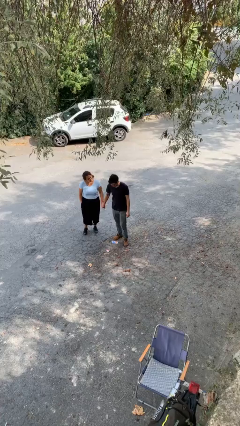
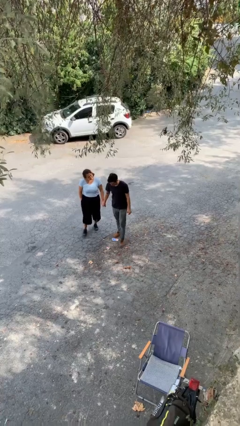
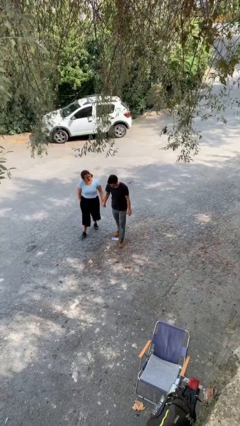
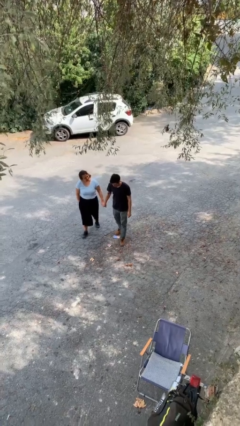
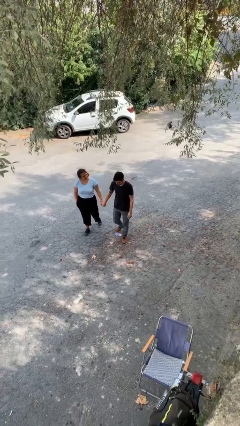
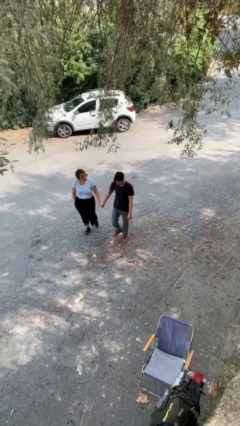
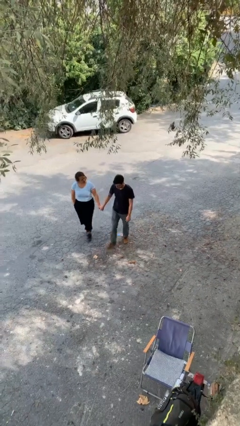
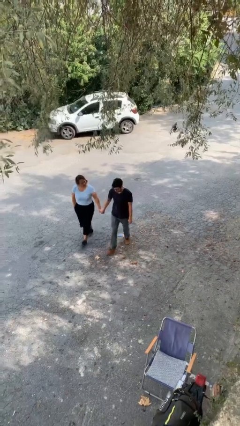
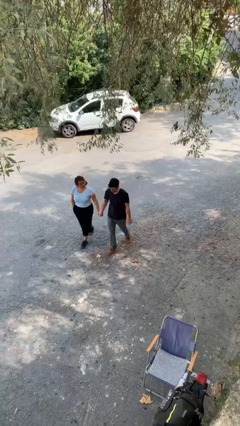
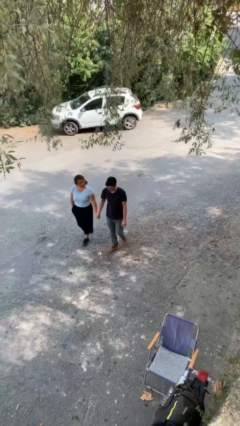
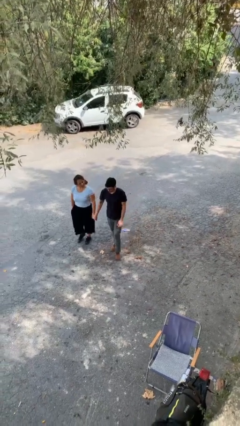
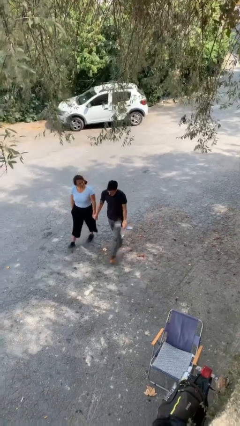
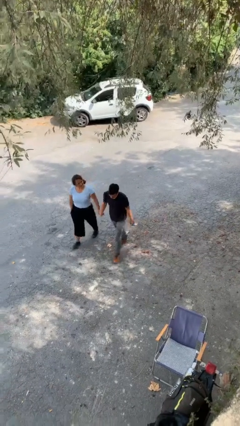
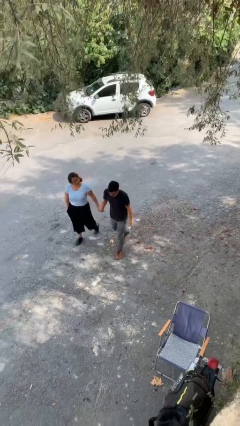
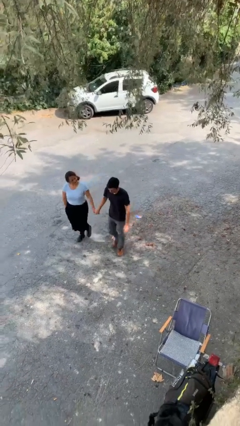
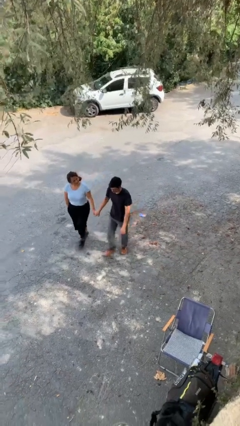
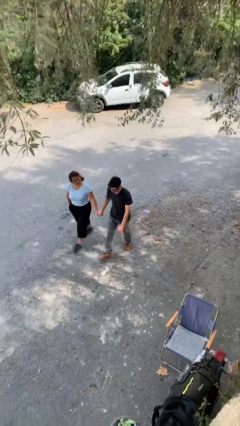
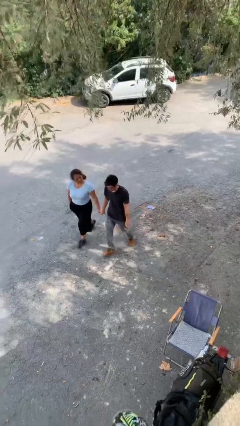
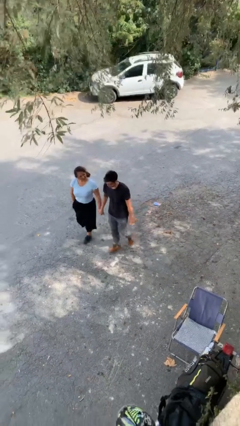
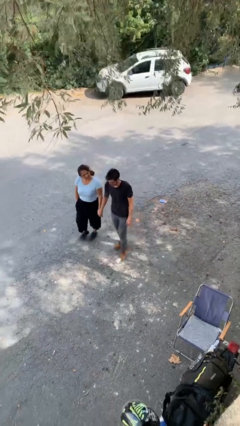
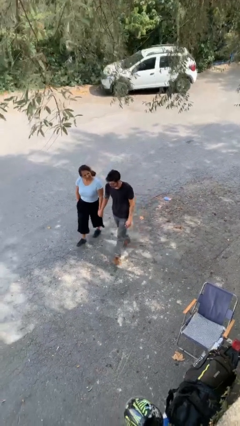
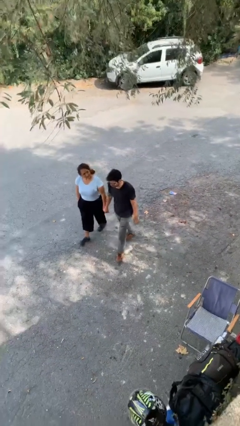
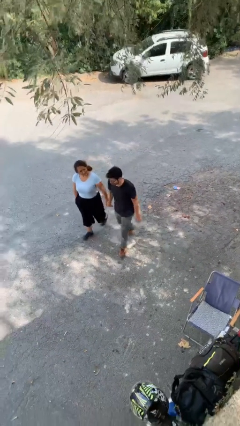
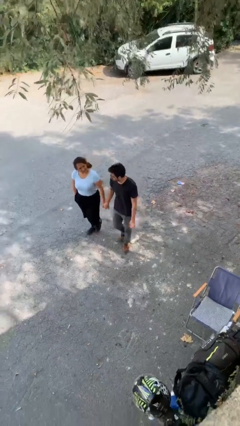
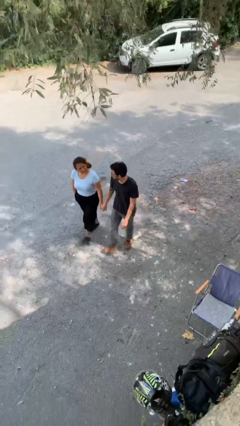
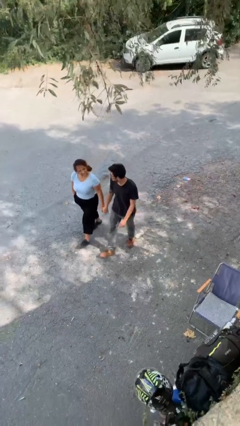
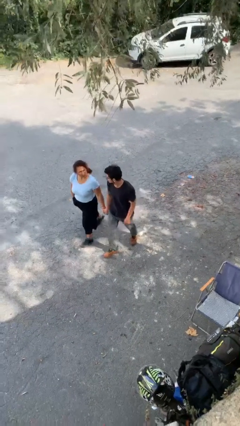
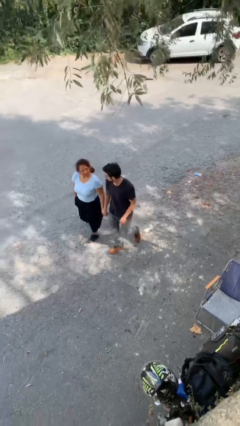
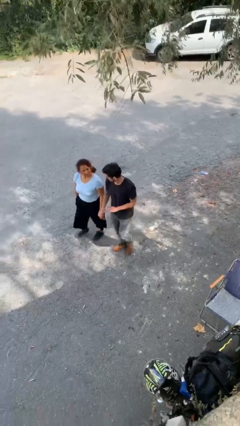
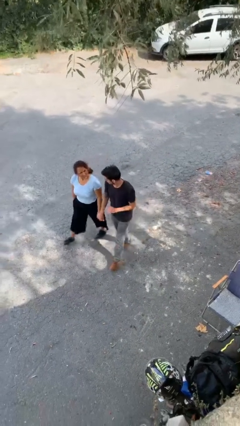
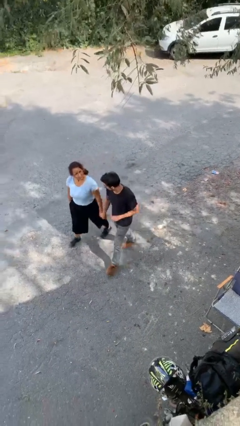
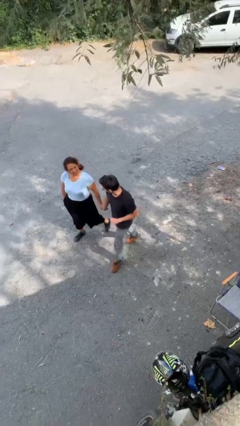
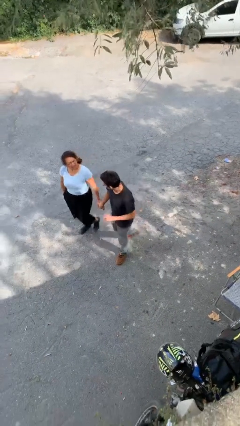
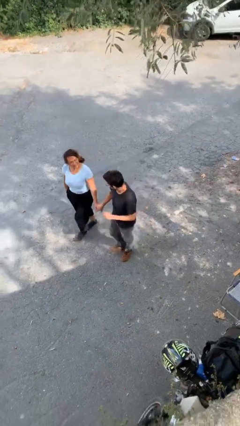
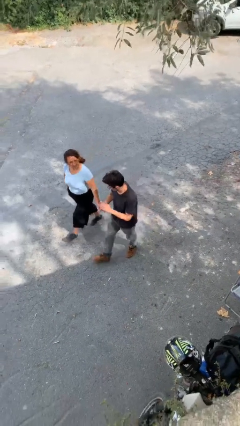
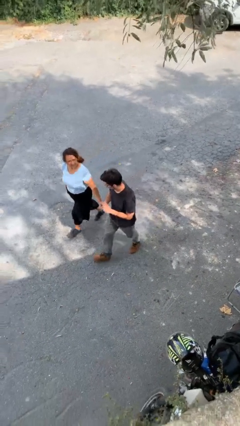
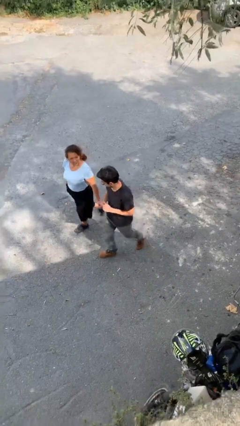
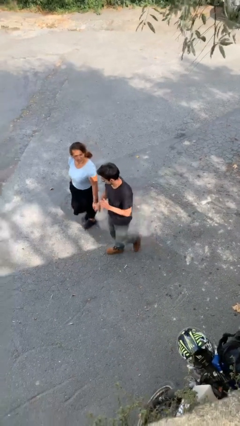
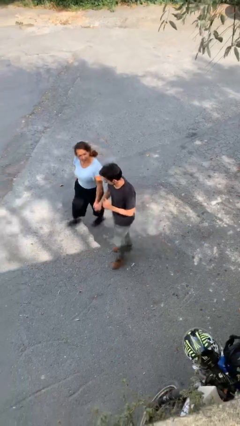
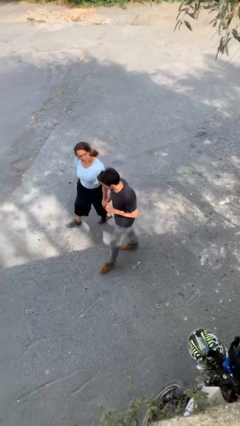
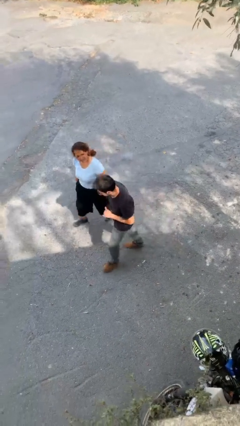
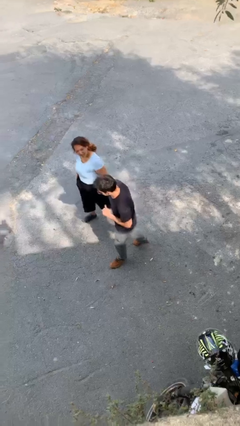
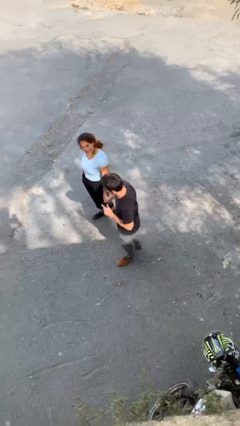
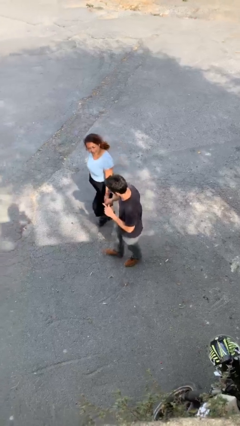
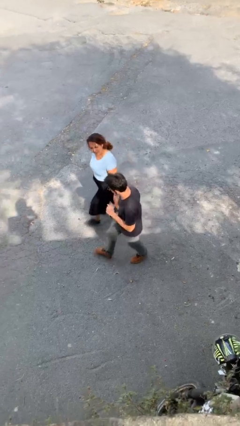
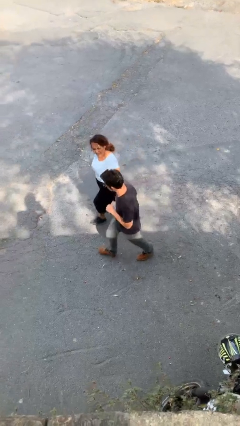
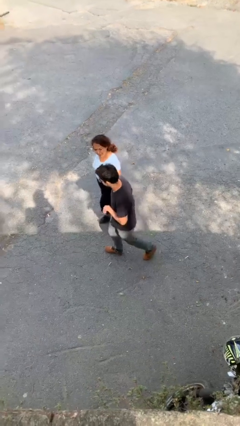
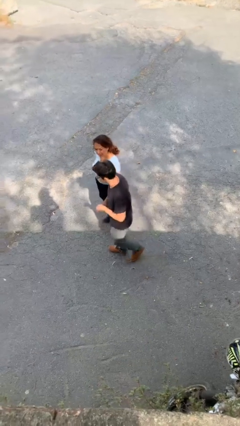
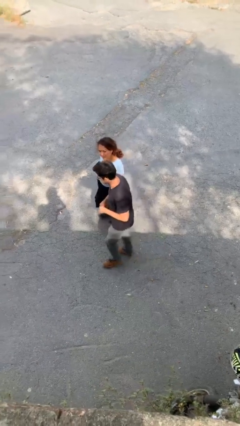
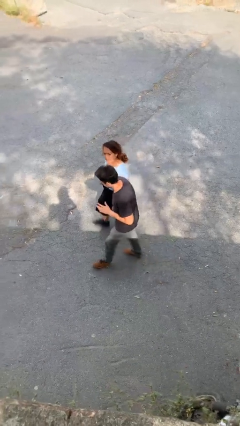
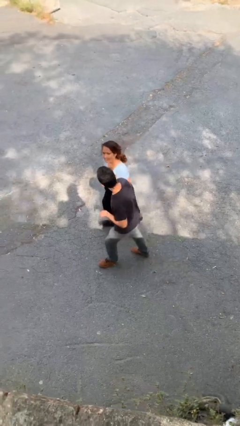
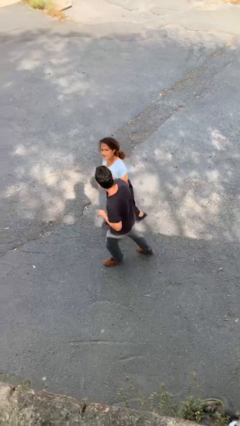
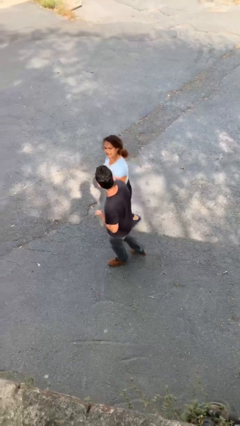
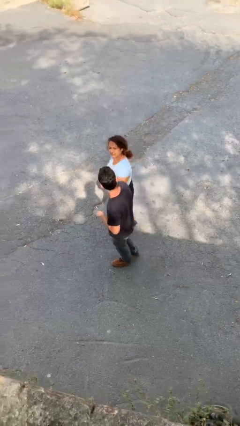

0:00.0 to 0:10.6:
person holds hand

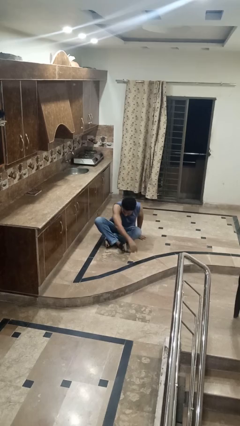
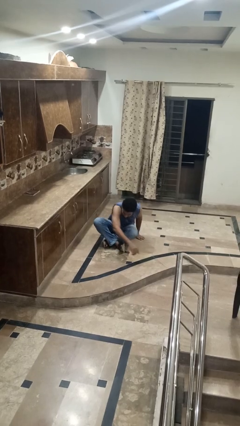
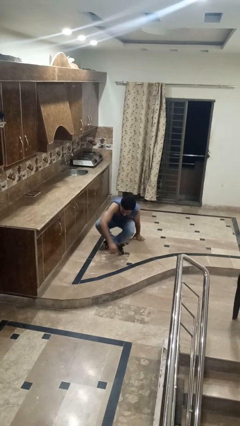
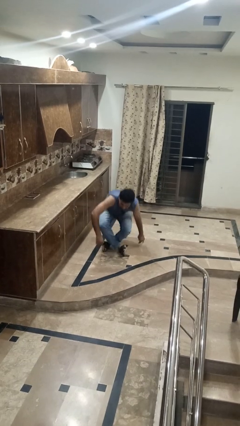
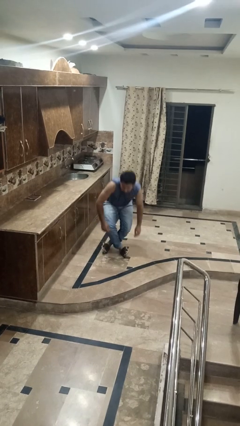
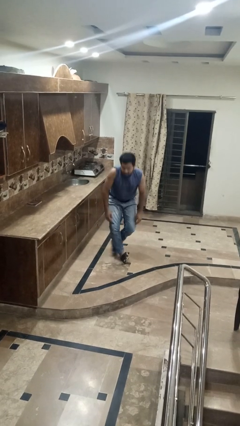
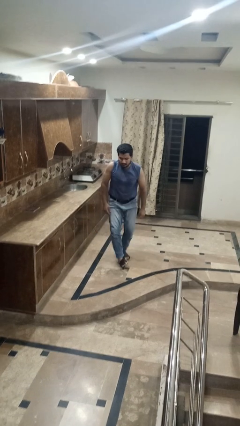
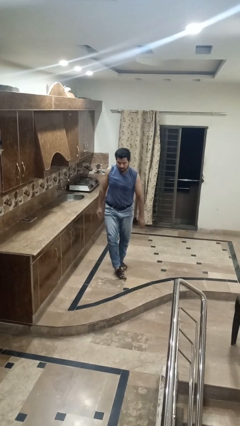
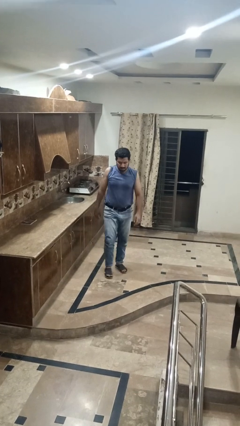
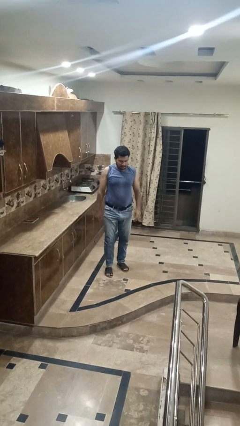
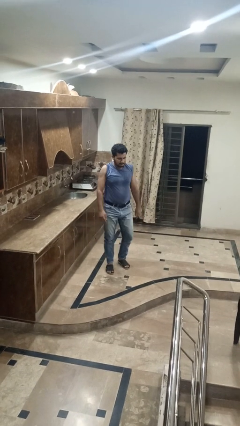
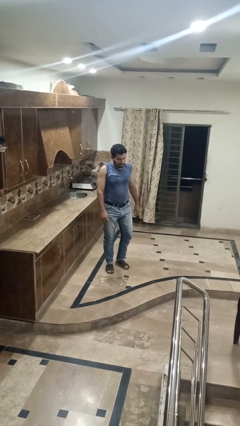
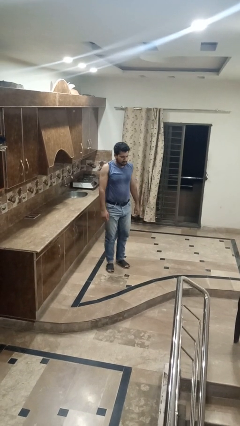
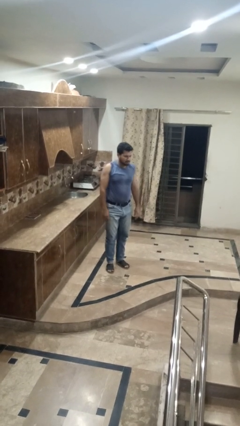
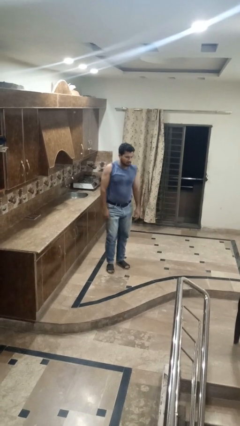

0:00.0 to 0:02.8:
person stands up from floor

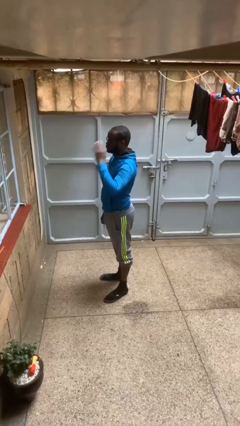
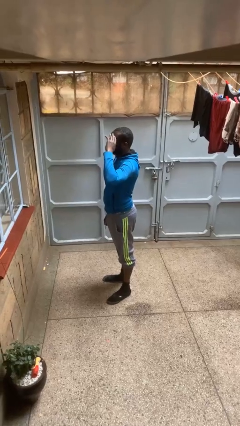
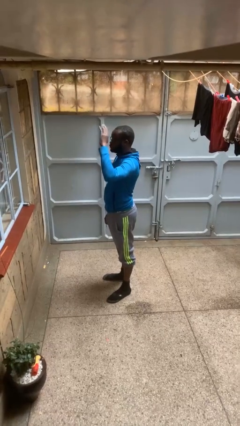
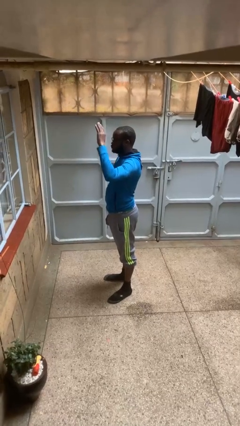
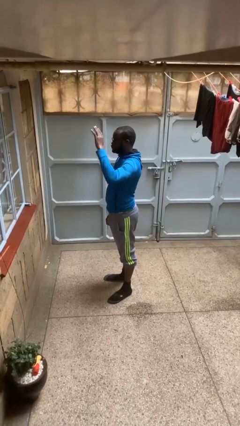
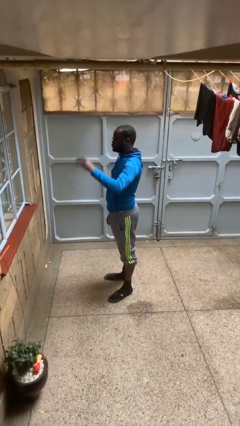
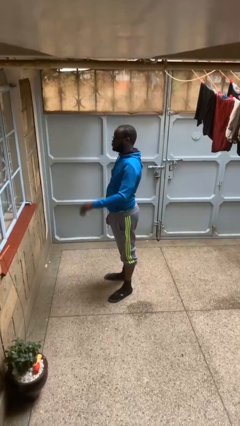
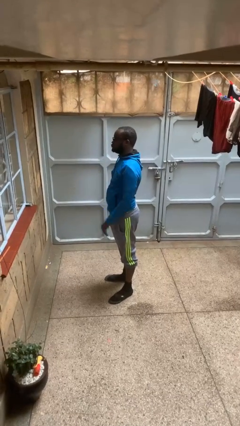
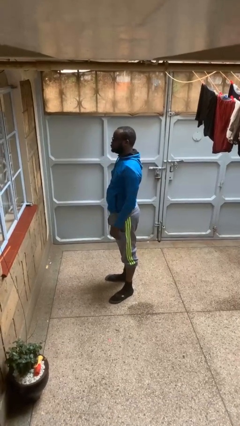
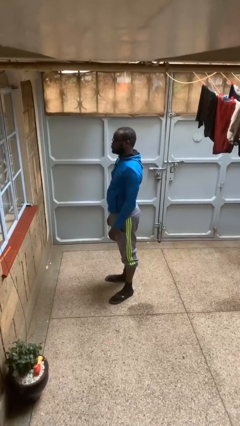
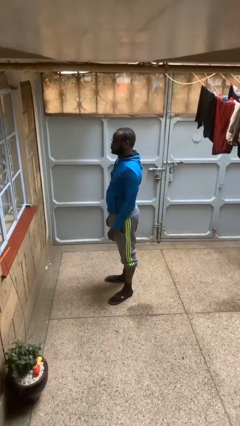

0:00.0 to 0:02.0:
person salutes

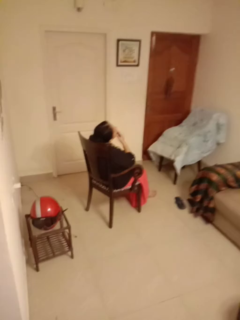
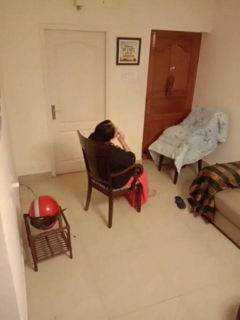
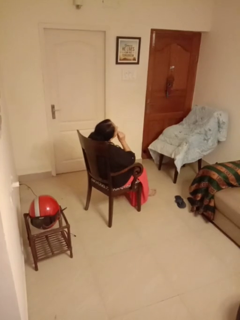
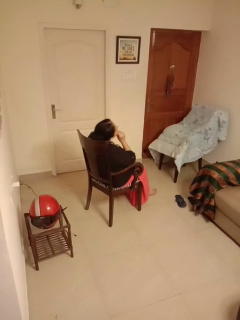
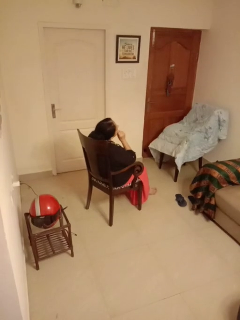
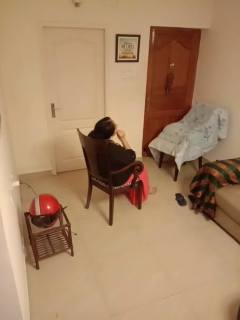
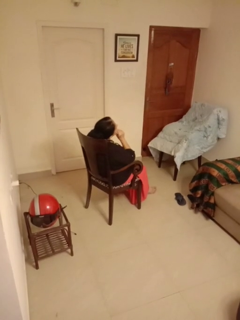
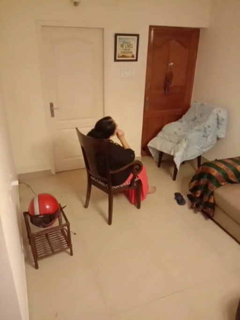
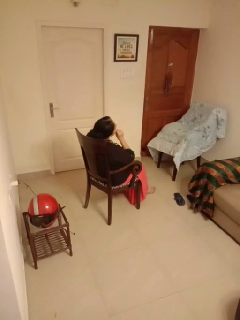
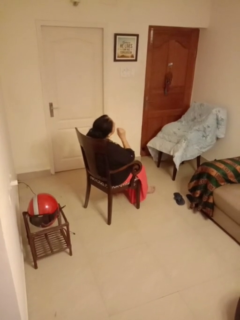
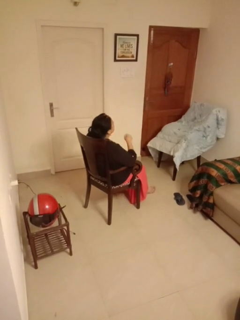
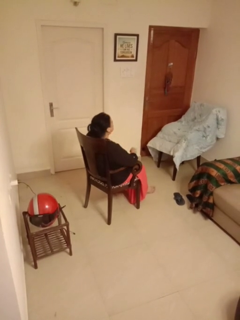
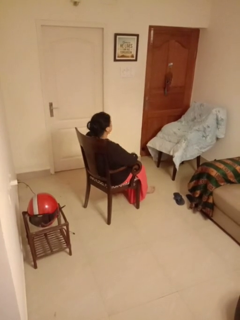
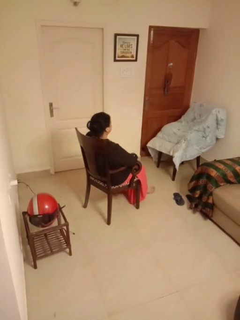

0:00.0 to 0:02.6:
person strokes chin

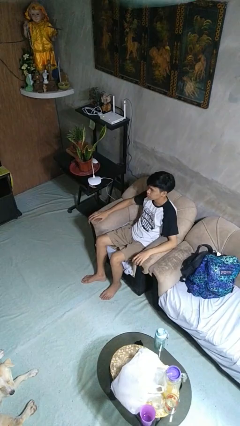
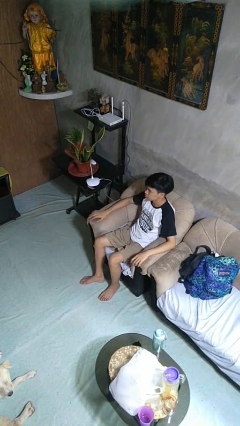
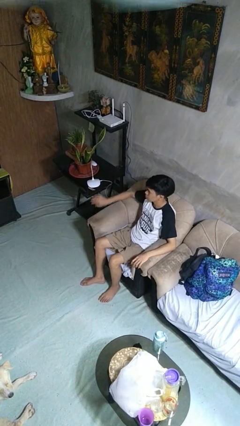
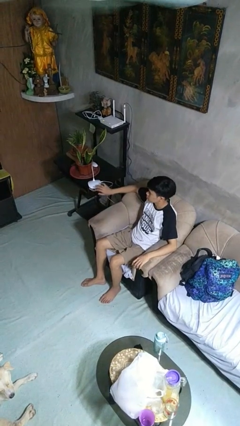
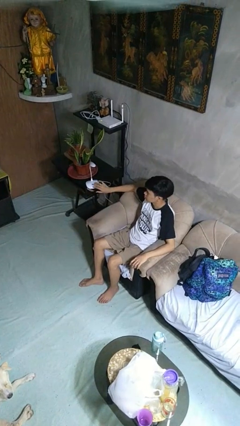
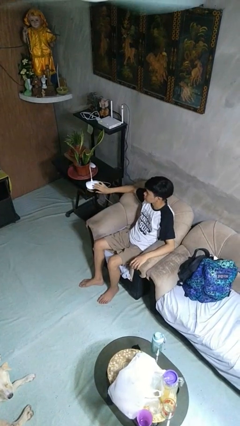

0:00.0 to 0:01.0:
person turns on lamp
